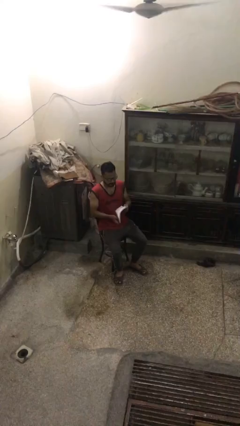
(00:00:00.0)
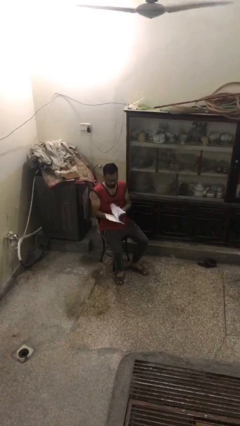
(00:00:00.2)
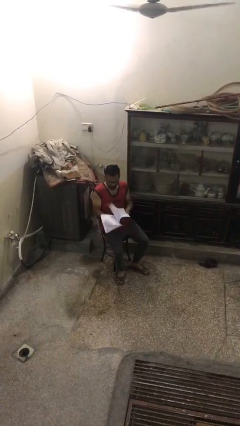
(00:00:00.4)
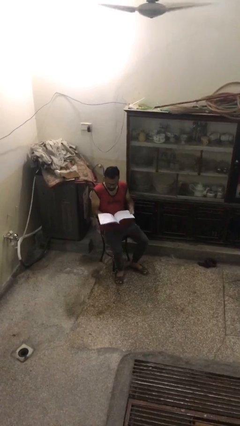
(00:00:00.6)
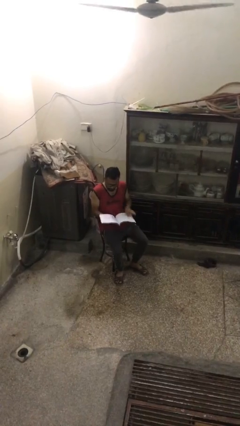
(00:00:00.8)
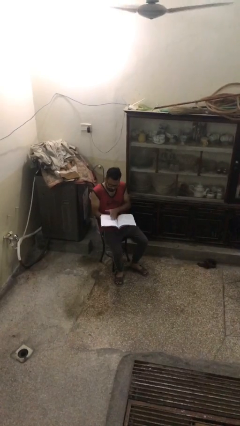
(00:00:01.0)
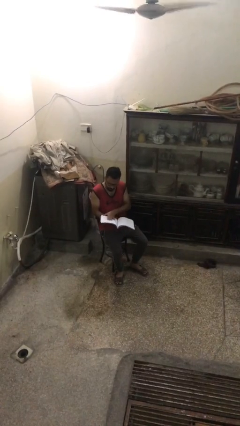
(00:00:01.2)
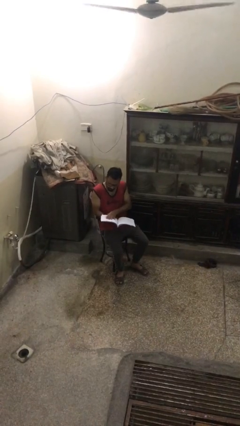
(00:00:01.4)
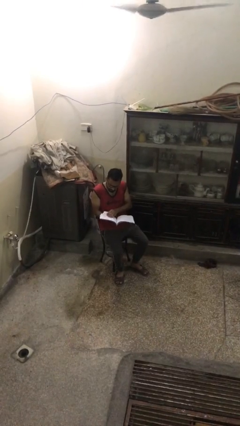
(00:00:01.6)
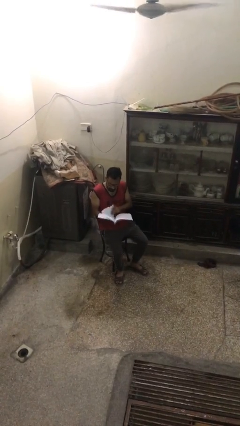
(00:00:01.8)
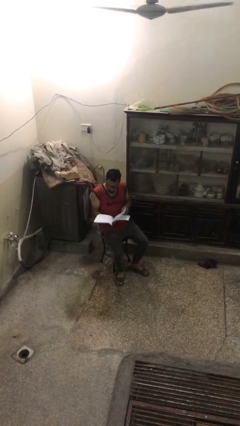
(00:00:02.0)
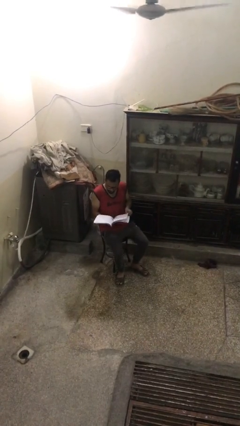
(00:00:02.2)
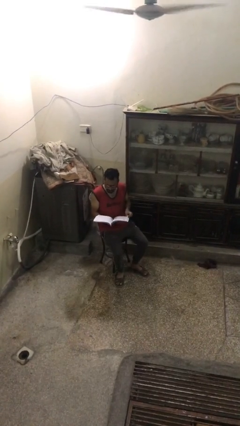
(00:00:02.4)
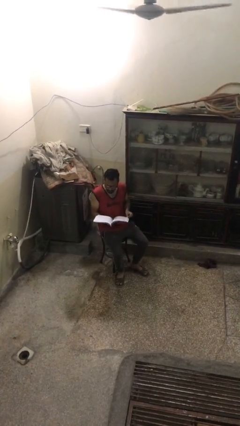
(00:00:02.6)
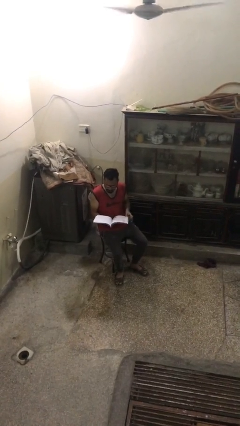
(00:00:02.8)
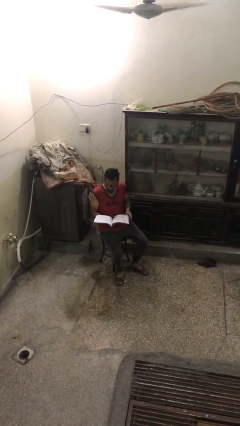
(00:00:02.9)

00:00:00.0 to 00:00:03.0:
person reads document

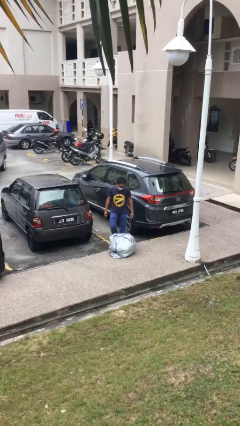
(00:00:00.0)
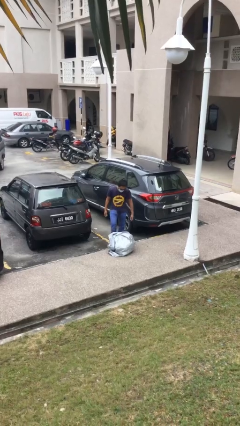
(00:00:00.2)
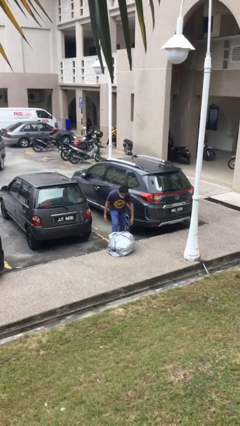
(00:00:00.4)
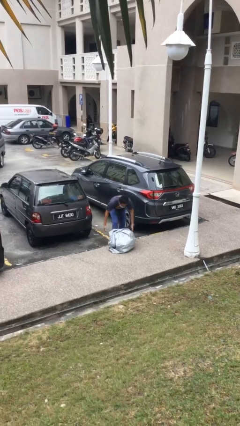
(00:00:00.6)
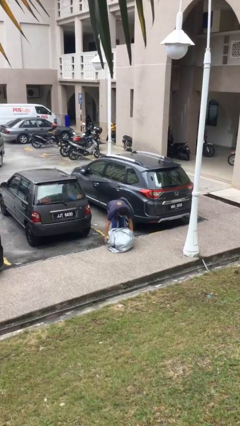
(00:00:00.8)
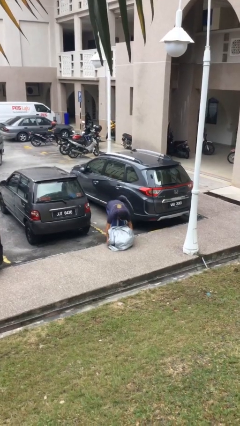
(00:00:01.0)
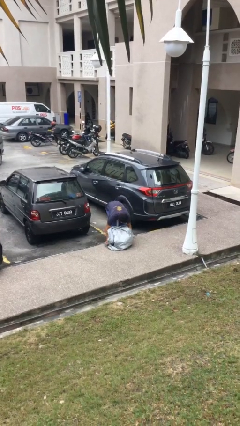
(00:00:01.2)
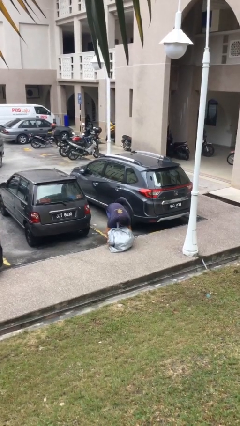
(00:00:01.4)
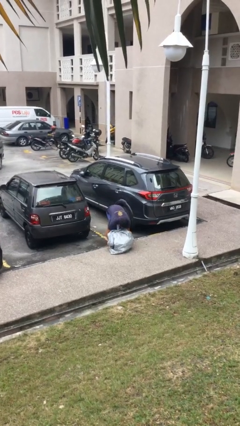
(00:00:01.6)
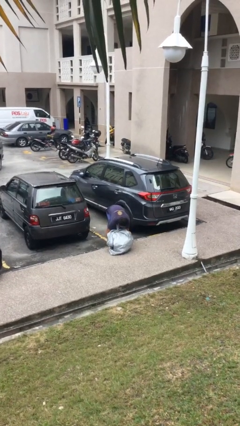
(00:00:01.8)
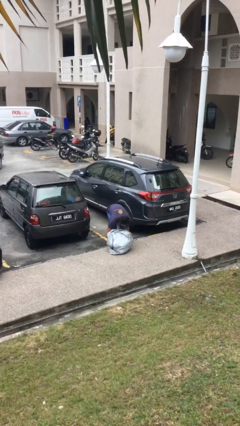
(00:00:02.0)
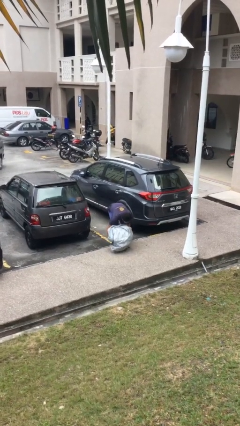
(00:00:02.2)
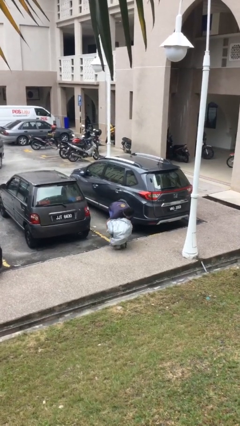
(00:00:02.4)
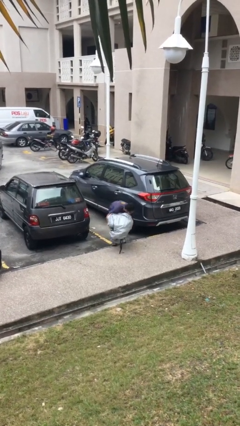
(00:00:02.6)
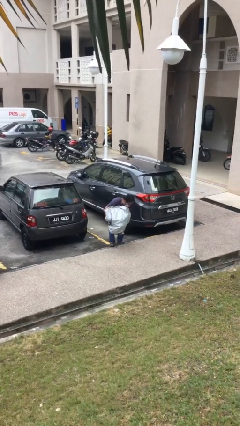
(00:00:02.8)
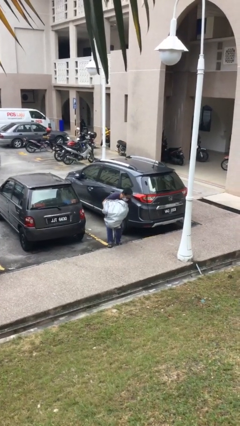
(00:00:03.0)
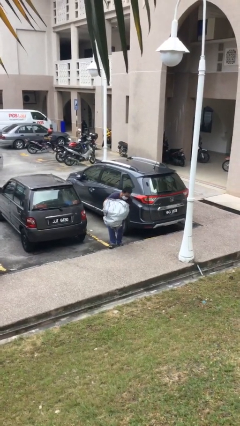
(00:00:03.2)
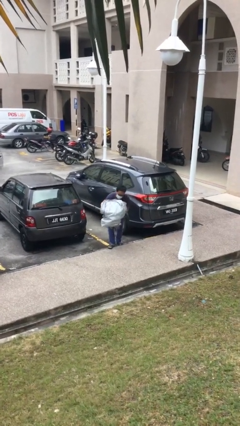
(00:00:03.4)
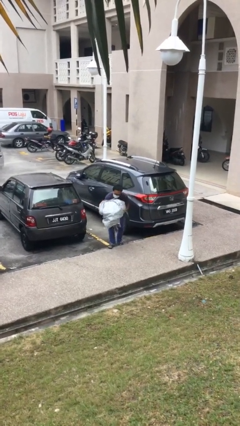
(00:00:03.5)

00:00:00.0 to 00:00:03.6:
person picks up object from floor

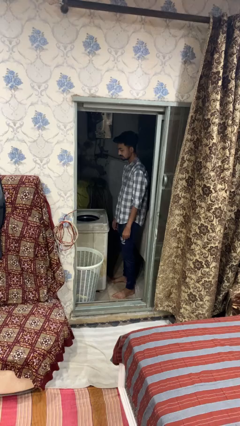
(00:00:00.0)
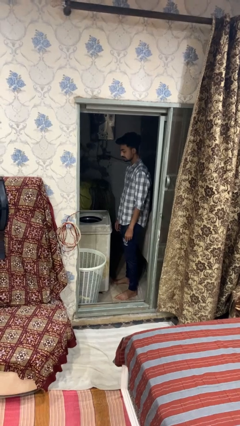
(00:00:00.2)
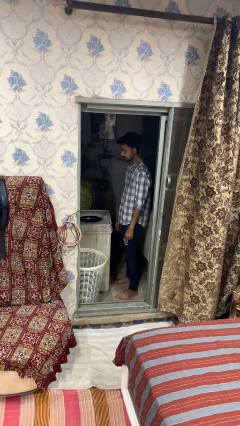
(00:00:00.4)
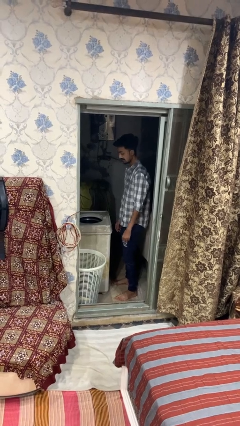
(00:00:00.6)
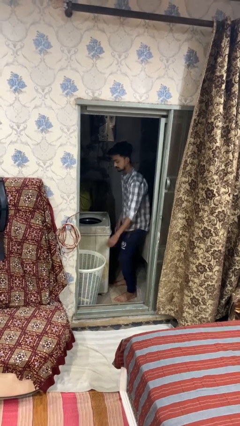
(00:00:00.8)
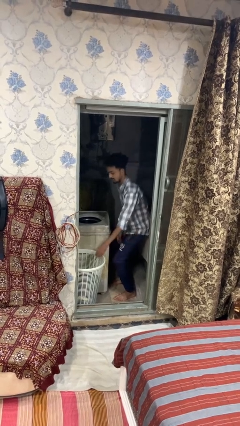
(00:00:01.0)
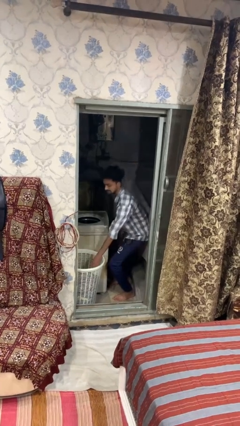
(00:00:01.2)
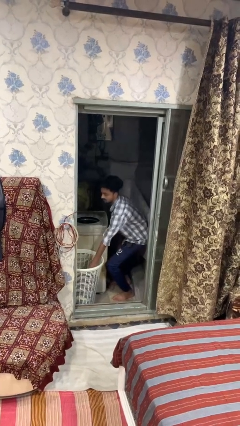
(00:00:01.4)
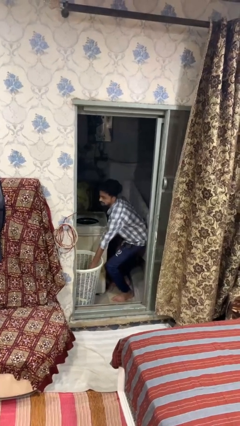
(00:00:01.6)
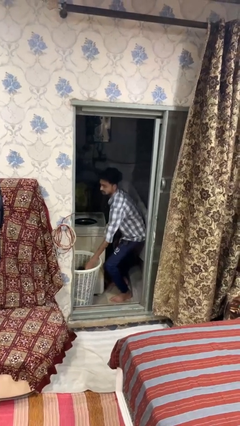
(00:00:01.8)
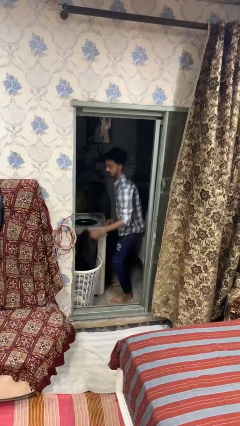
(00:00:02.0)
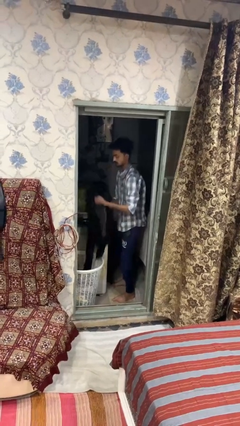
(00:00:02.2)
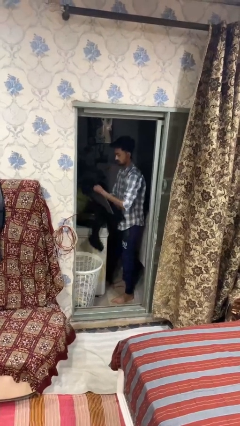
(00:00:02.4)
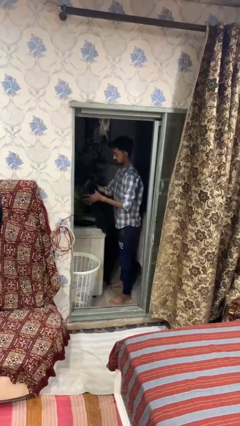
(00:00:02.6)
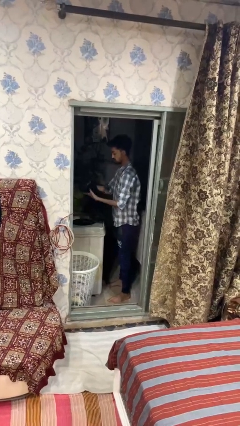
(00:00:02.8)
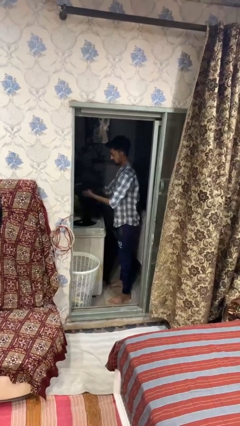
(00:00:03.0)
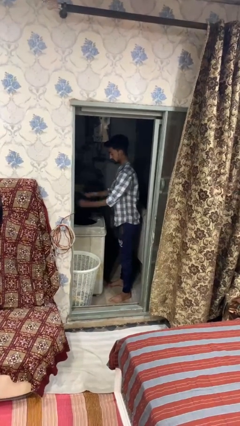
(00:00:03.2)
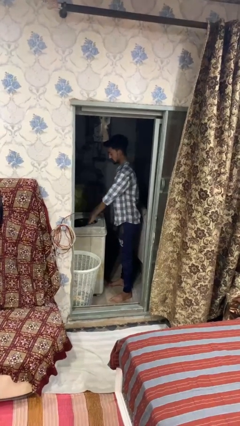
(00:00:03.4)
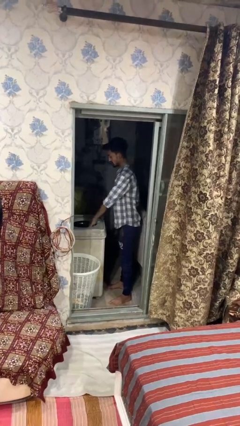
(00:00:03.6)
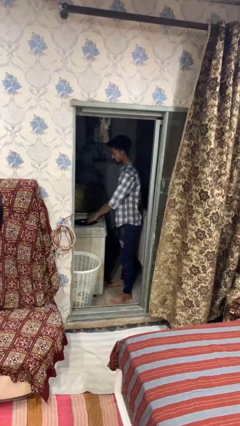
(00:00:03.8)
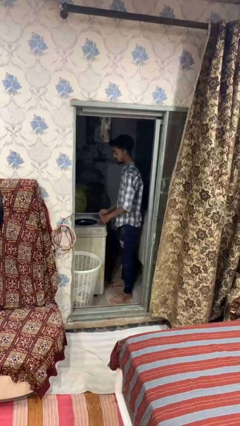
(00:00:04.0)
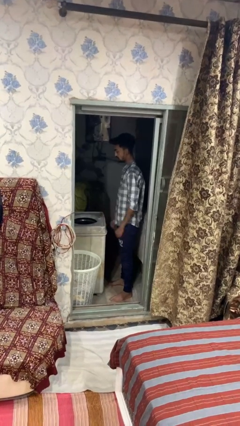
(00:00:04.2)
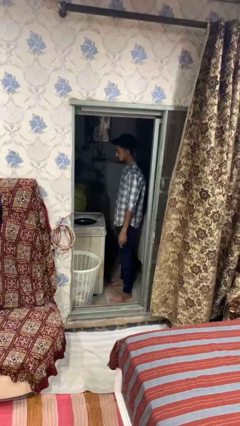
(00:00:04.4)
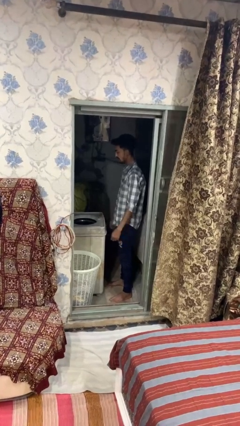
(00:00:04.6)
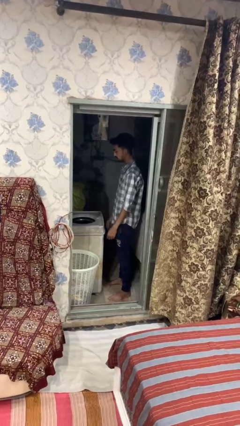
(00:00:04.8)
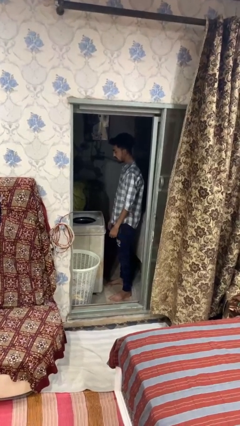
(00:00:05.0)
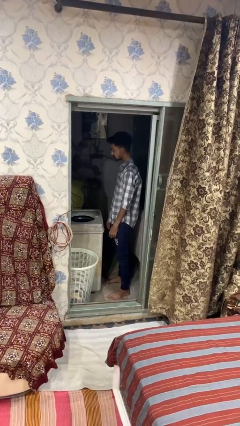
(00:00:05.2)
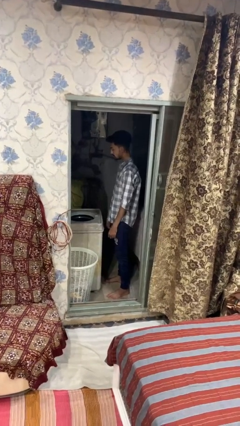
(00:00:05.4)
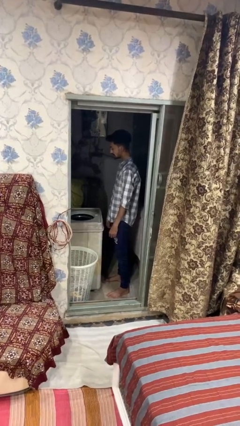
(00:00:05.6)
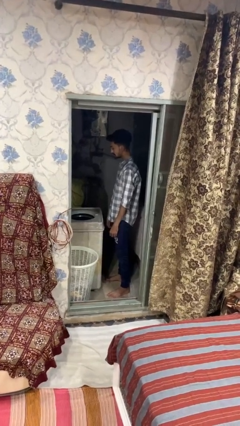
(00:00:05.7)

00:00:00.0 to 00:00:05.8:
person loads dryer

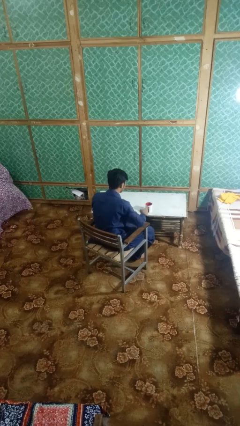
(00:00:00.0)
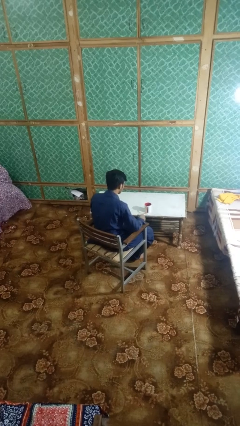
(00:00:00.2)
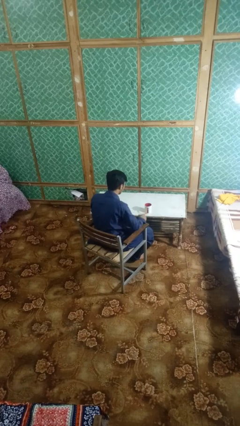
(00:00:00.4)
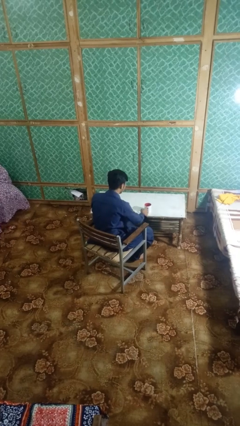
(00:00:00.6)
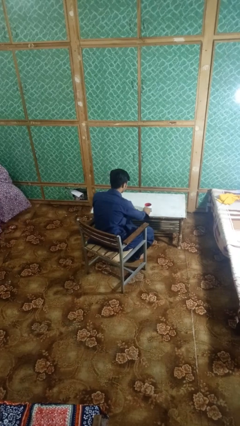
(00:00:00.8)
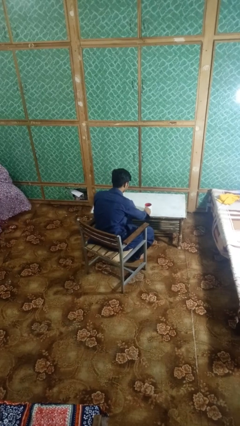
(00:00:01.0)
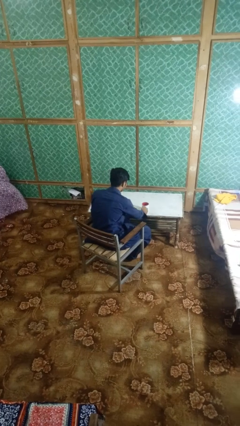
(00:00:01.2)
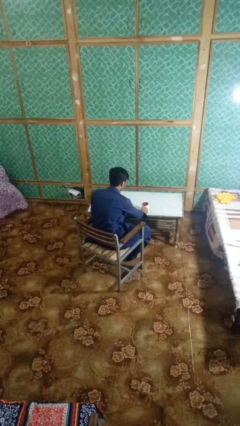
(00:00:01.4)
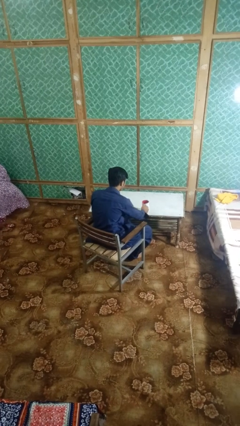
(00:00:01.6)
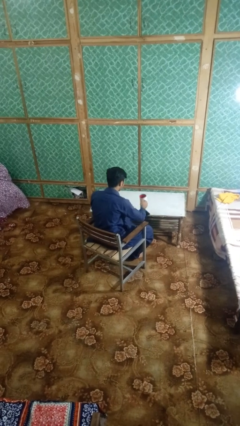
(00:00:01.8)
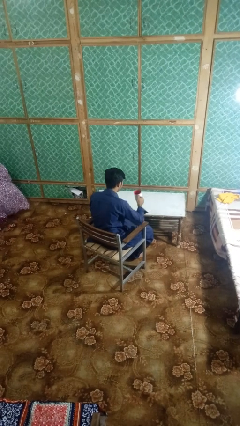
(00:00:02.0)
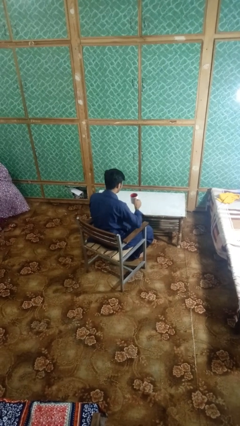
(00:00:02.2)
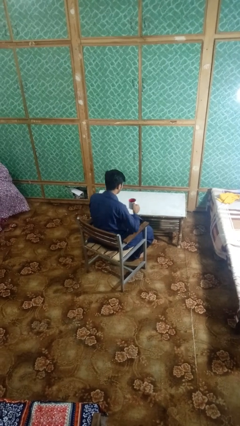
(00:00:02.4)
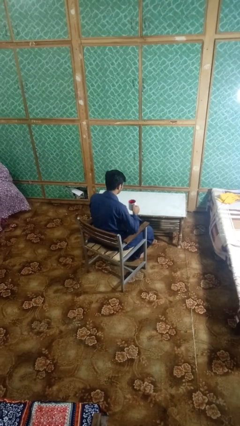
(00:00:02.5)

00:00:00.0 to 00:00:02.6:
person picks up object from table

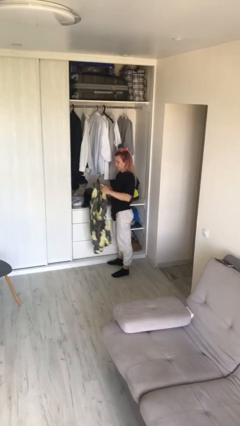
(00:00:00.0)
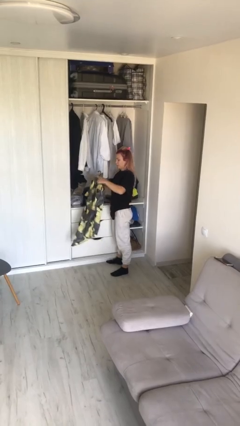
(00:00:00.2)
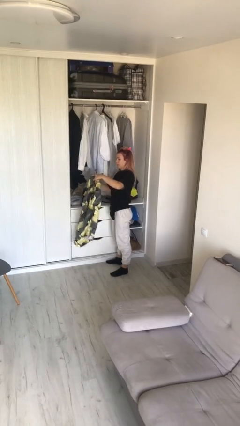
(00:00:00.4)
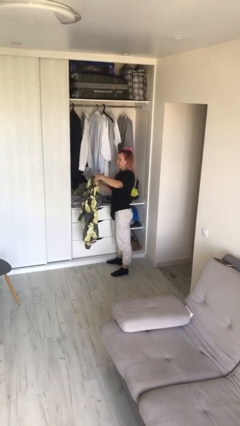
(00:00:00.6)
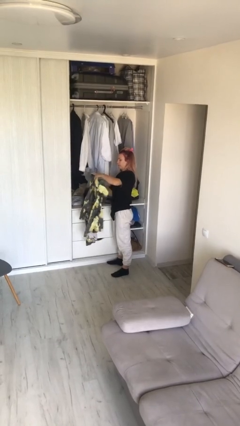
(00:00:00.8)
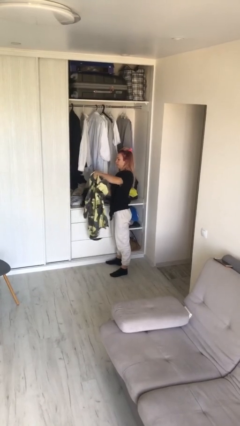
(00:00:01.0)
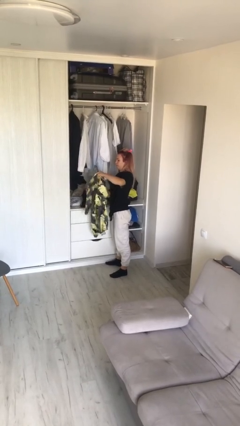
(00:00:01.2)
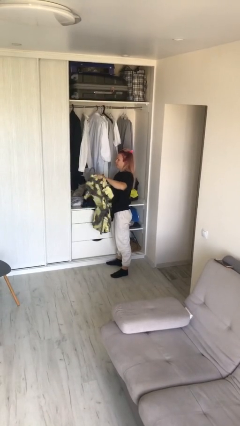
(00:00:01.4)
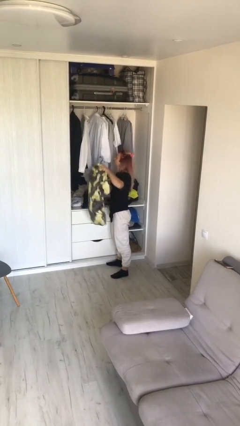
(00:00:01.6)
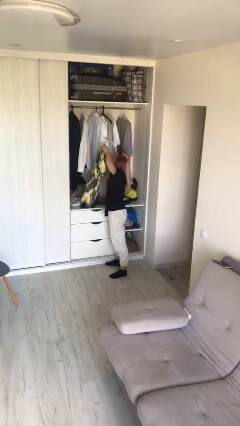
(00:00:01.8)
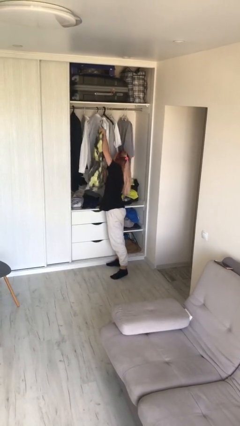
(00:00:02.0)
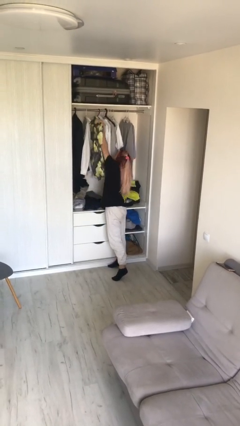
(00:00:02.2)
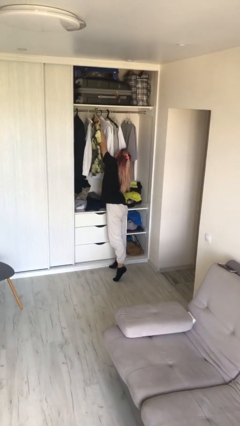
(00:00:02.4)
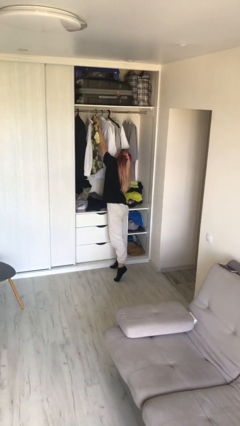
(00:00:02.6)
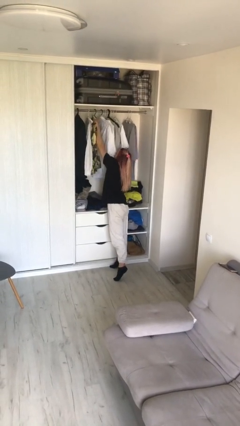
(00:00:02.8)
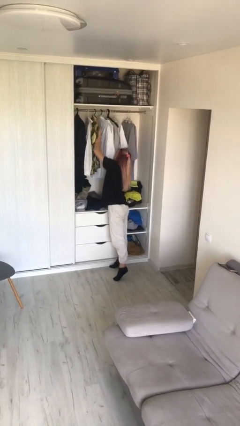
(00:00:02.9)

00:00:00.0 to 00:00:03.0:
person puts clothes into closet
